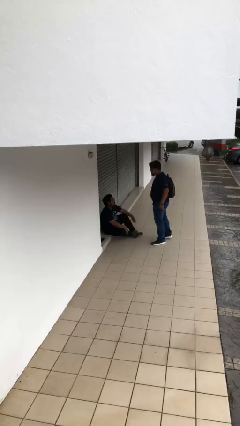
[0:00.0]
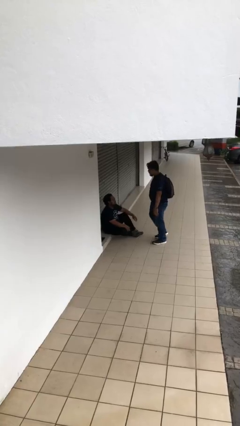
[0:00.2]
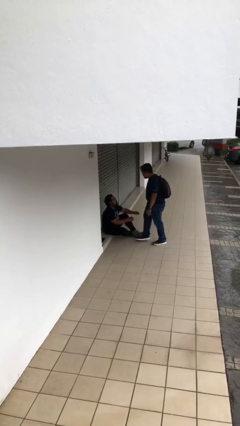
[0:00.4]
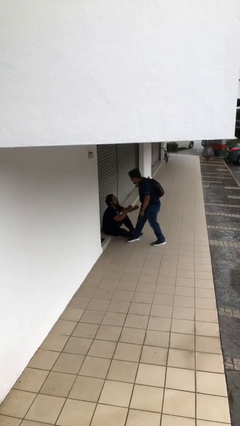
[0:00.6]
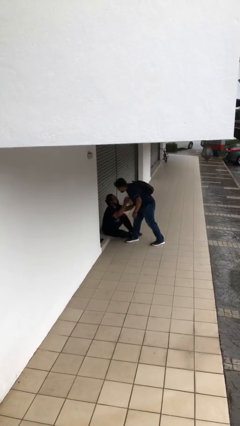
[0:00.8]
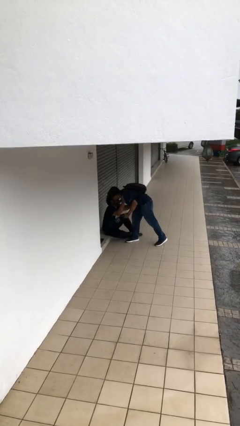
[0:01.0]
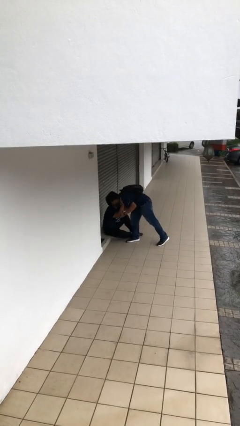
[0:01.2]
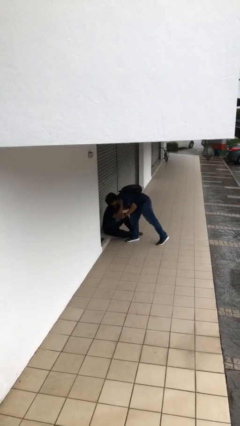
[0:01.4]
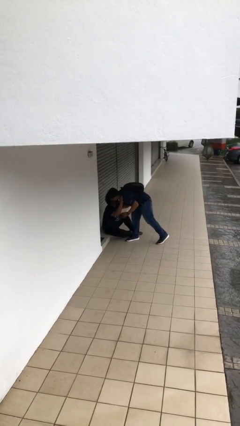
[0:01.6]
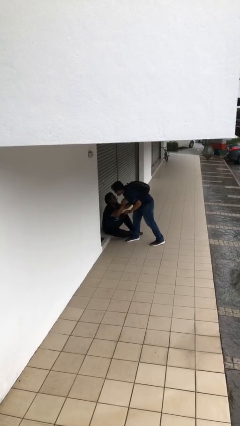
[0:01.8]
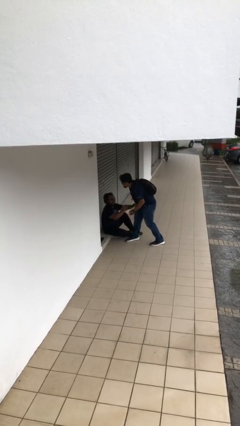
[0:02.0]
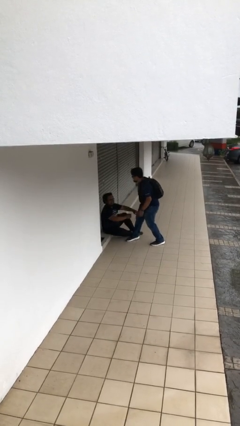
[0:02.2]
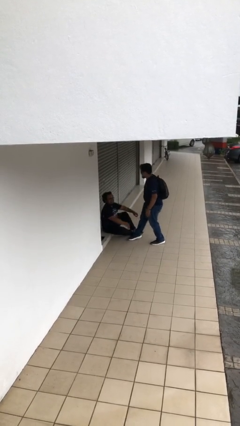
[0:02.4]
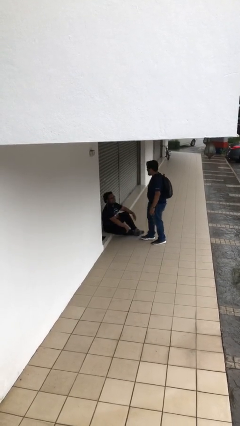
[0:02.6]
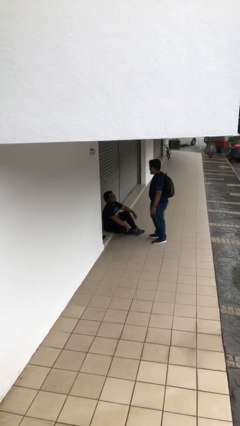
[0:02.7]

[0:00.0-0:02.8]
person embraces person

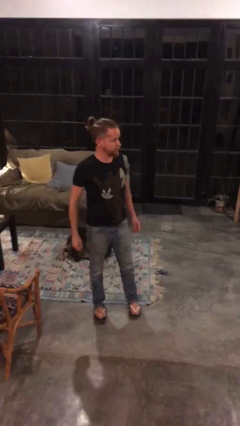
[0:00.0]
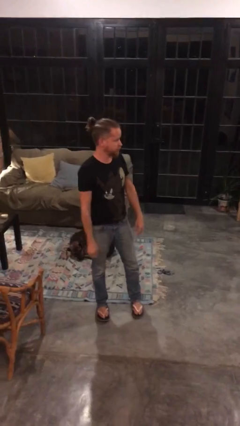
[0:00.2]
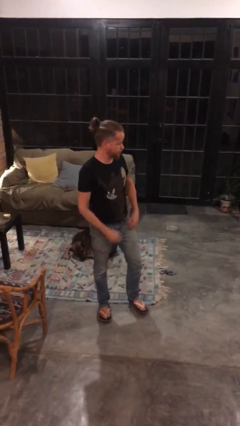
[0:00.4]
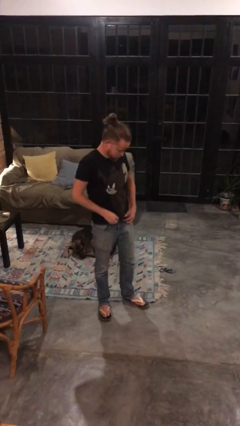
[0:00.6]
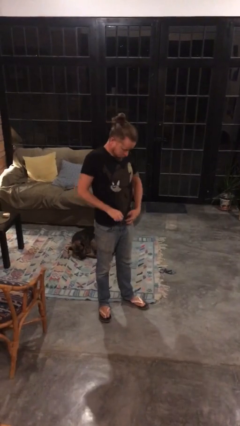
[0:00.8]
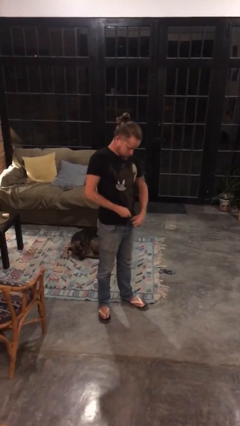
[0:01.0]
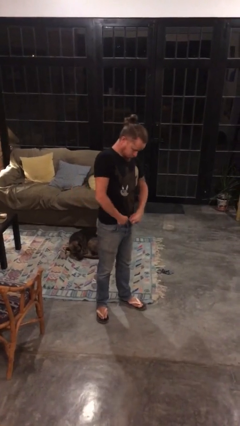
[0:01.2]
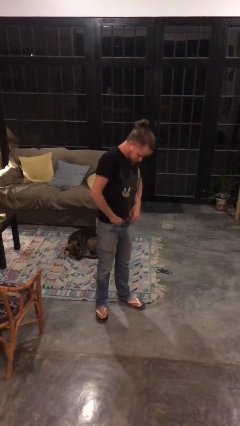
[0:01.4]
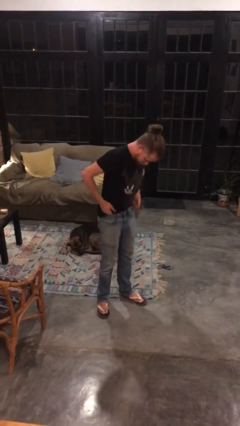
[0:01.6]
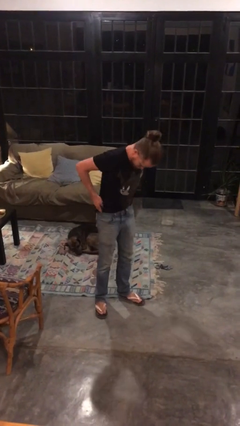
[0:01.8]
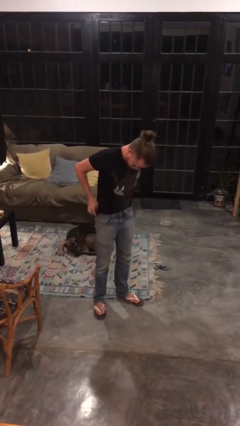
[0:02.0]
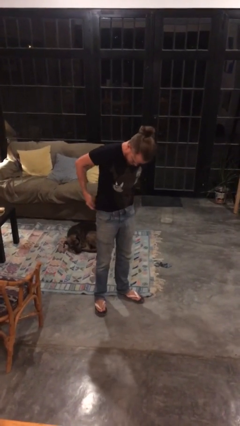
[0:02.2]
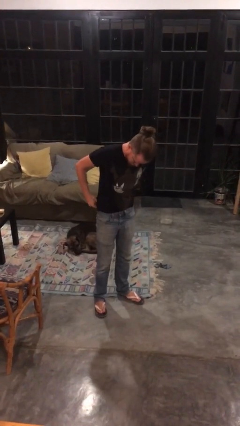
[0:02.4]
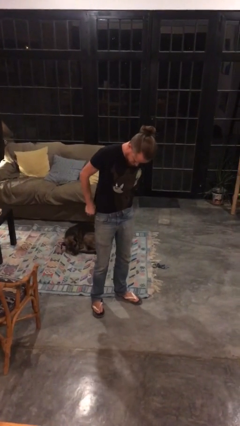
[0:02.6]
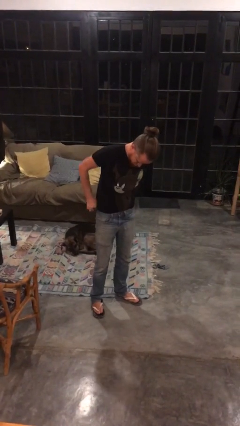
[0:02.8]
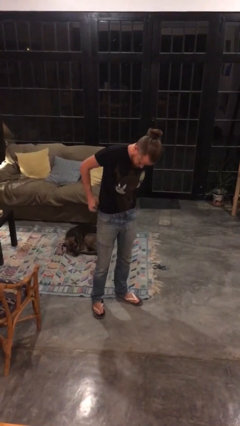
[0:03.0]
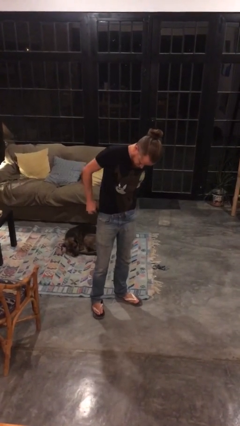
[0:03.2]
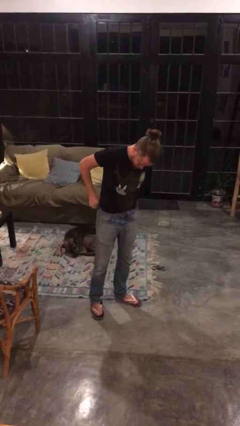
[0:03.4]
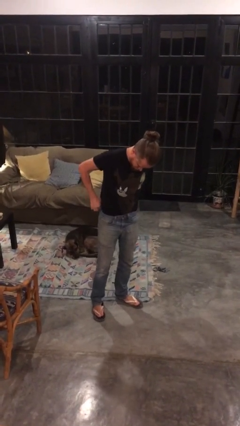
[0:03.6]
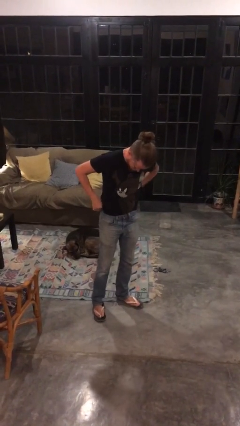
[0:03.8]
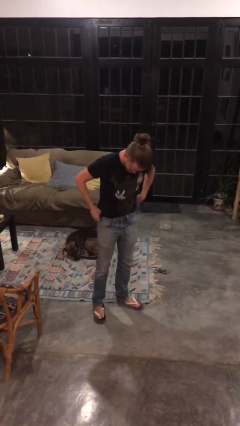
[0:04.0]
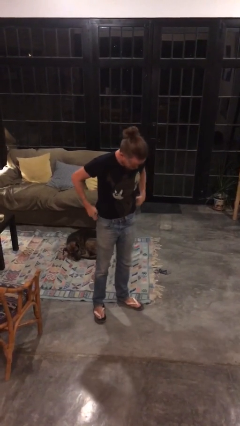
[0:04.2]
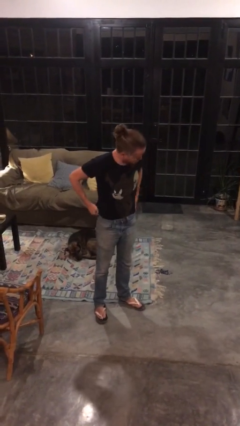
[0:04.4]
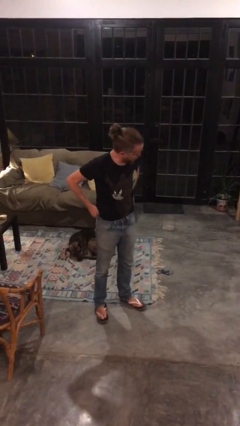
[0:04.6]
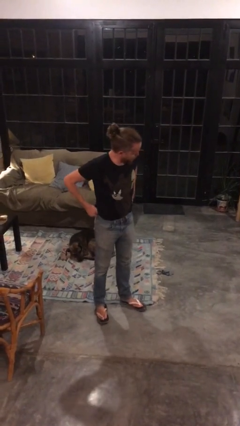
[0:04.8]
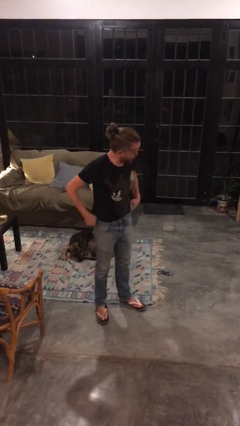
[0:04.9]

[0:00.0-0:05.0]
person tucks in shirt

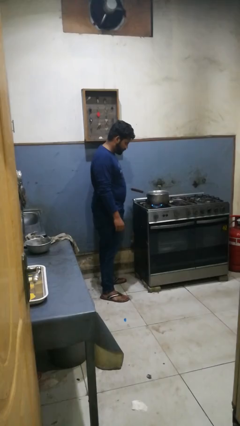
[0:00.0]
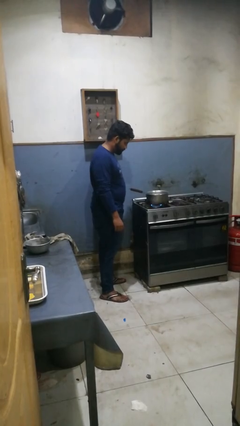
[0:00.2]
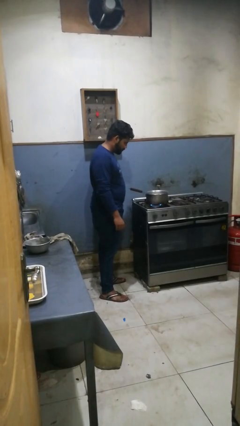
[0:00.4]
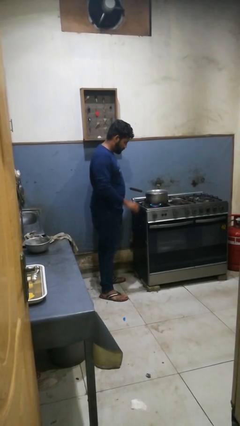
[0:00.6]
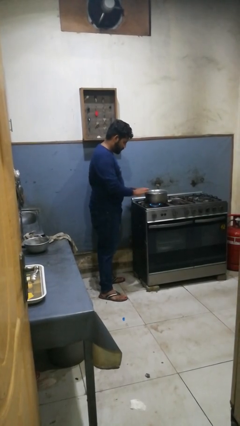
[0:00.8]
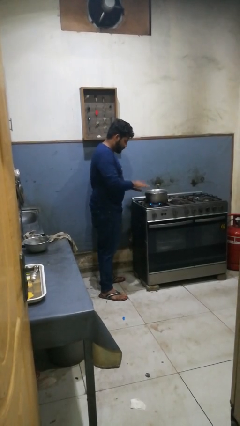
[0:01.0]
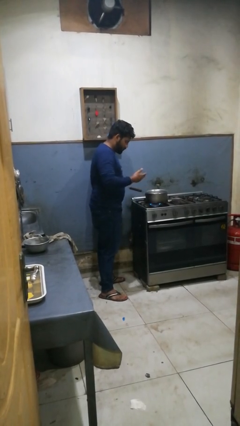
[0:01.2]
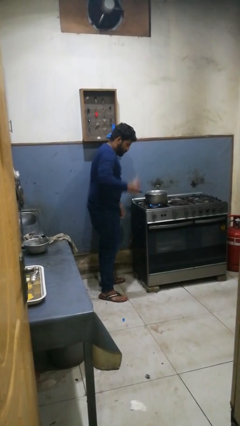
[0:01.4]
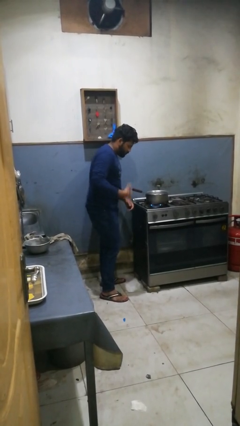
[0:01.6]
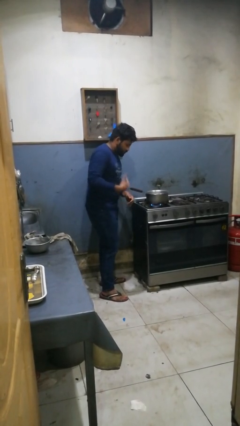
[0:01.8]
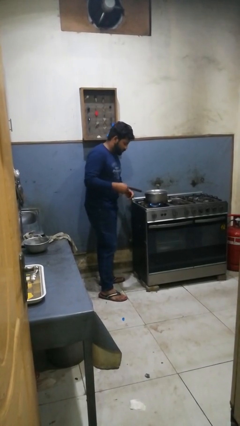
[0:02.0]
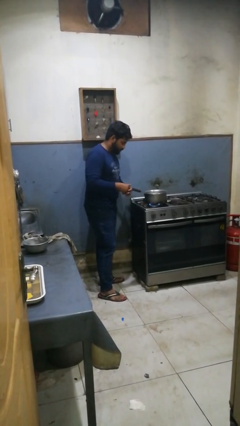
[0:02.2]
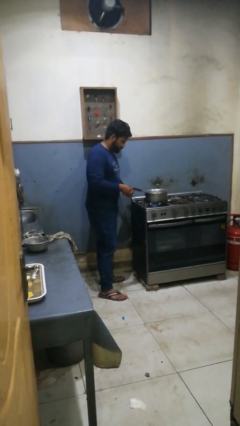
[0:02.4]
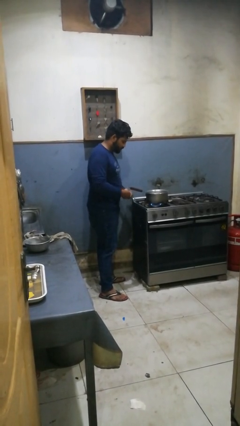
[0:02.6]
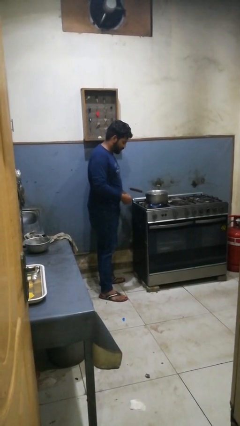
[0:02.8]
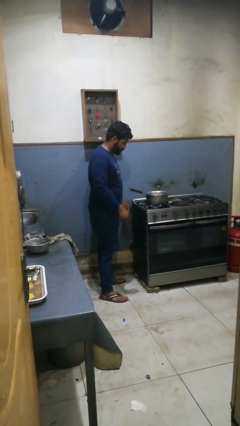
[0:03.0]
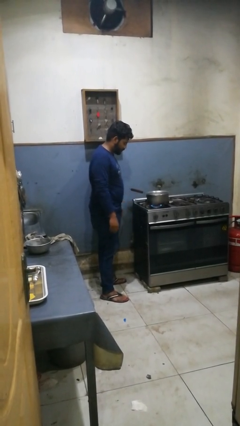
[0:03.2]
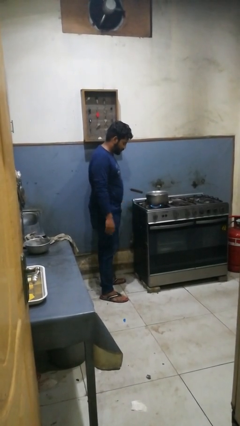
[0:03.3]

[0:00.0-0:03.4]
person burns hand

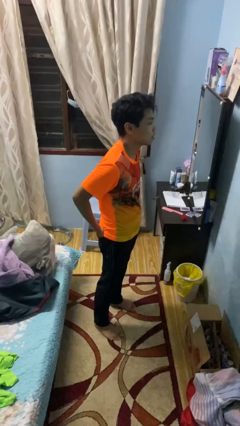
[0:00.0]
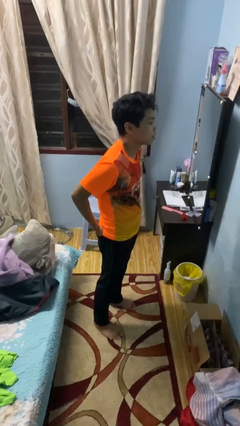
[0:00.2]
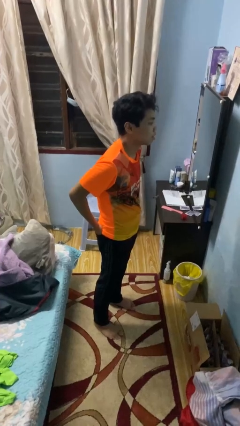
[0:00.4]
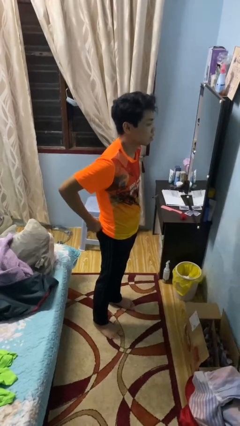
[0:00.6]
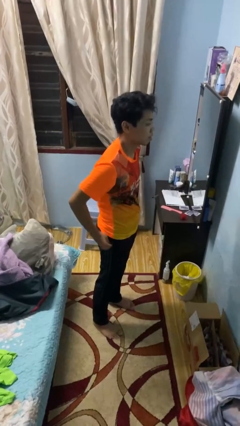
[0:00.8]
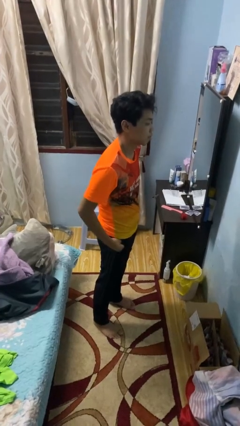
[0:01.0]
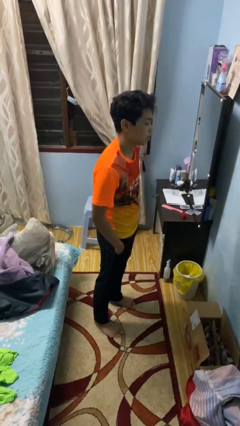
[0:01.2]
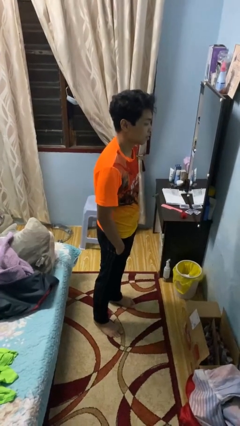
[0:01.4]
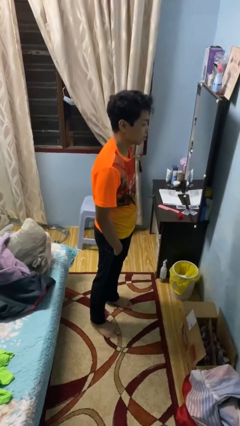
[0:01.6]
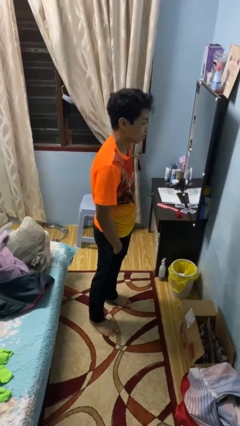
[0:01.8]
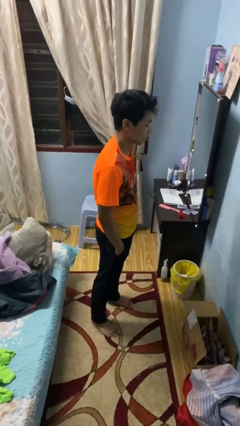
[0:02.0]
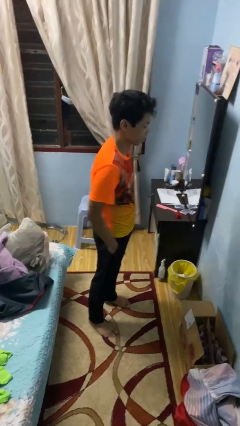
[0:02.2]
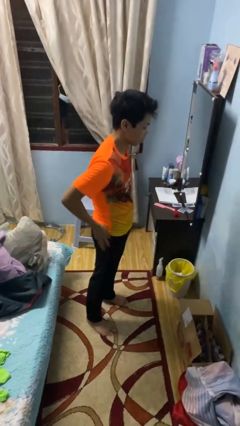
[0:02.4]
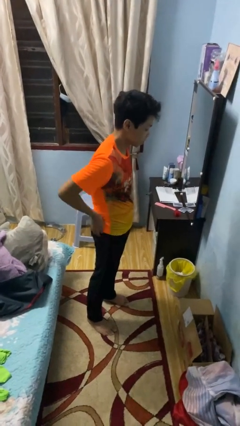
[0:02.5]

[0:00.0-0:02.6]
person puts hands in back pockets

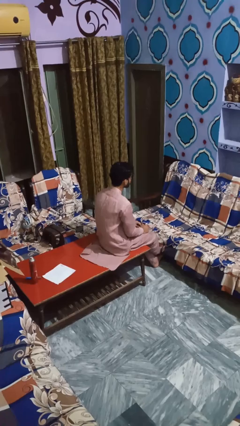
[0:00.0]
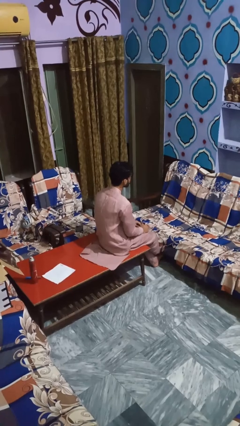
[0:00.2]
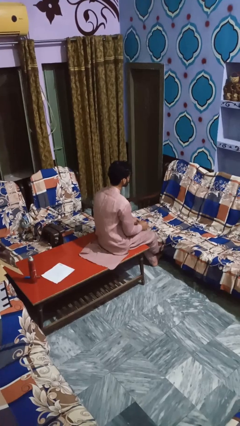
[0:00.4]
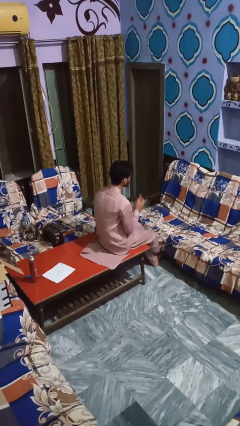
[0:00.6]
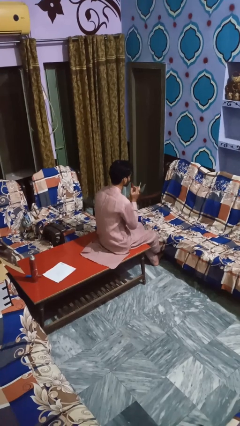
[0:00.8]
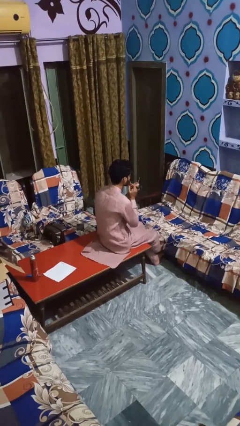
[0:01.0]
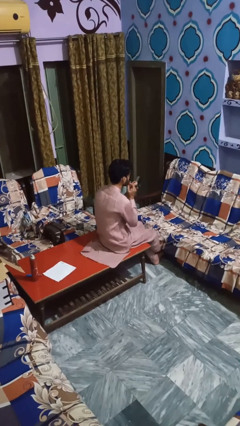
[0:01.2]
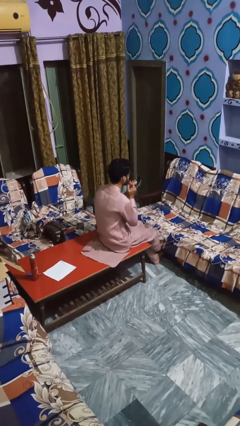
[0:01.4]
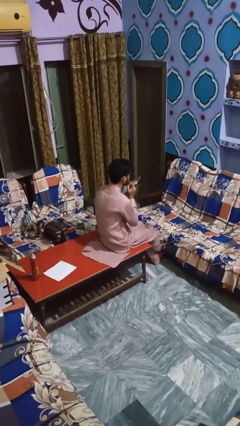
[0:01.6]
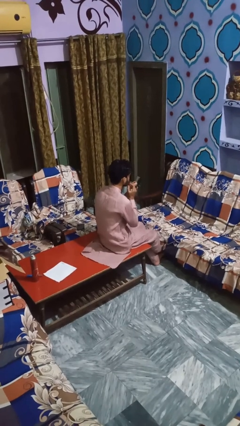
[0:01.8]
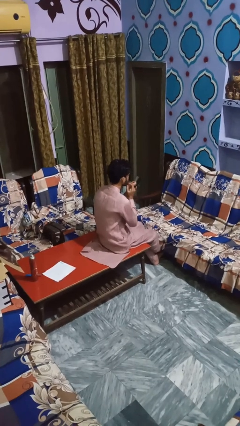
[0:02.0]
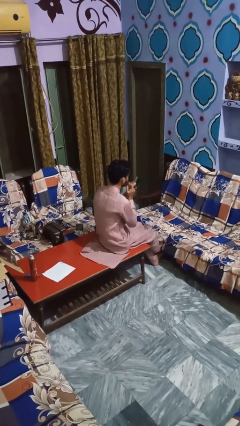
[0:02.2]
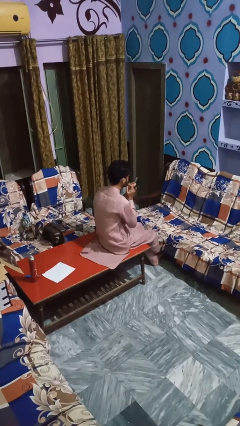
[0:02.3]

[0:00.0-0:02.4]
person applies lip makeup

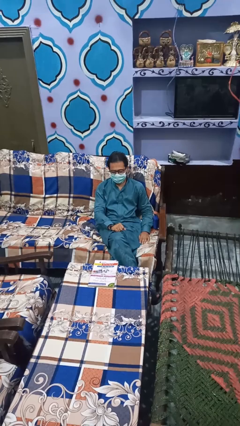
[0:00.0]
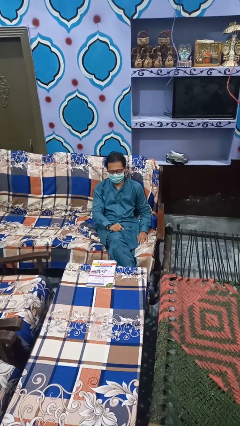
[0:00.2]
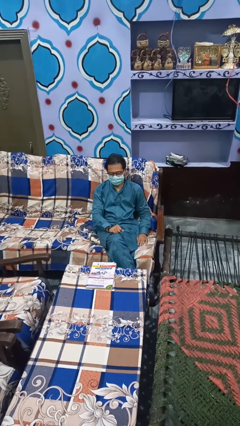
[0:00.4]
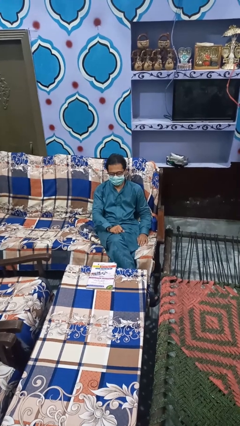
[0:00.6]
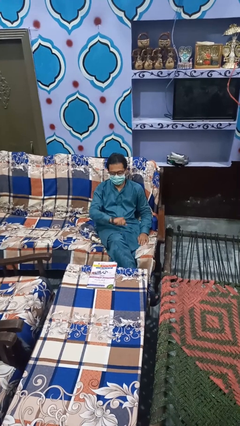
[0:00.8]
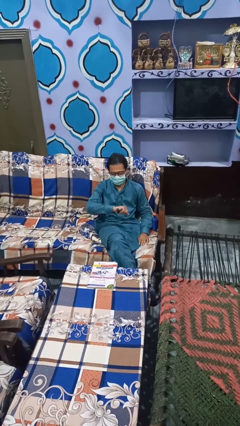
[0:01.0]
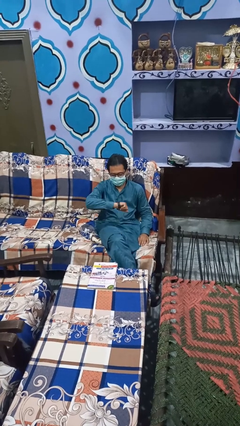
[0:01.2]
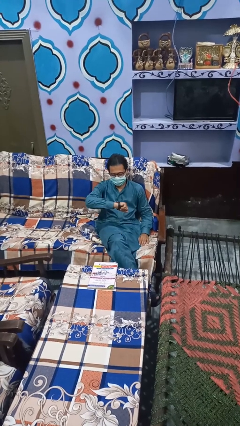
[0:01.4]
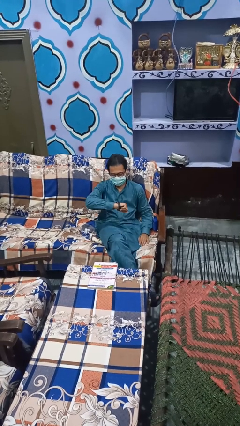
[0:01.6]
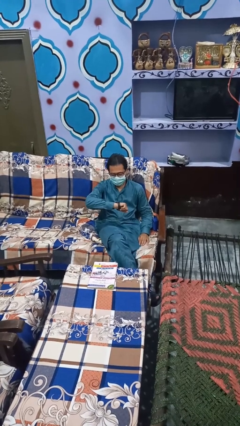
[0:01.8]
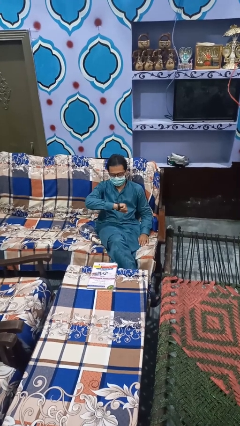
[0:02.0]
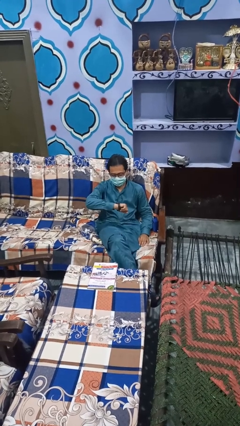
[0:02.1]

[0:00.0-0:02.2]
person looks at wristwatch
